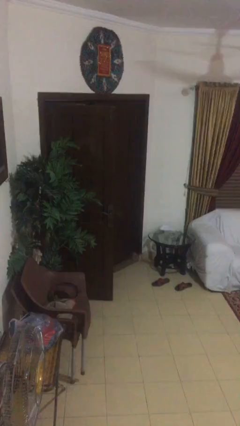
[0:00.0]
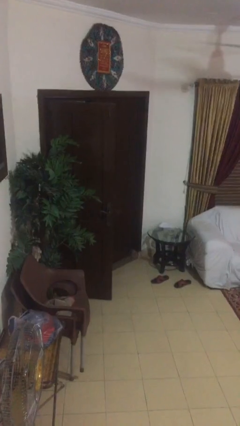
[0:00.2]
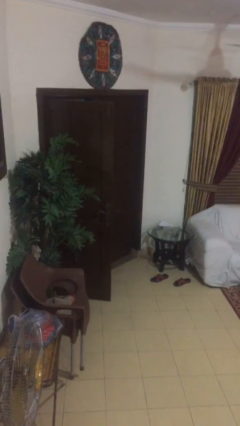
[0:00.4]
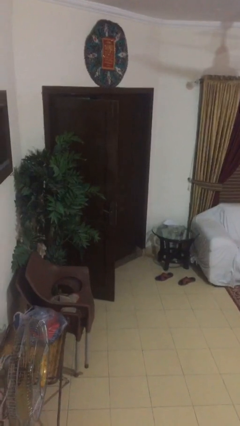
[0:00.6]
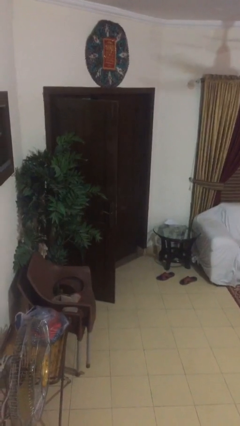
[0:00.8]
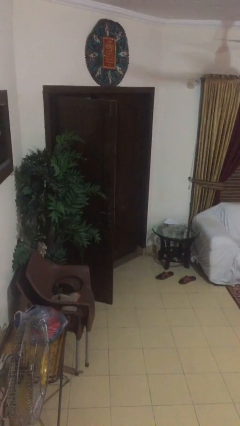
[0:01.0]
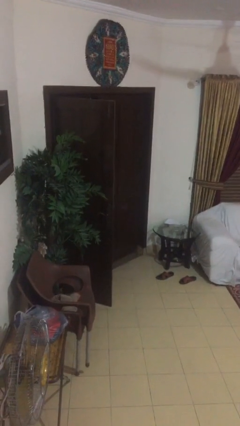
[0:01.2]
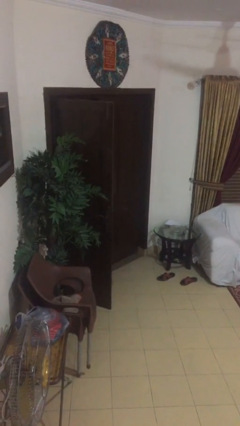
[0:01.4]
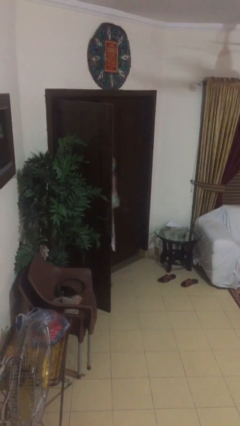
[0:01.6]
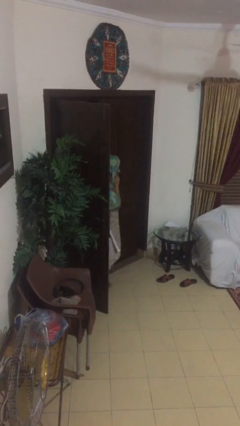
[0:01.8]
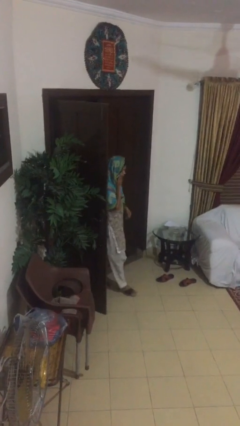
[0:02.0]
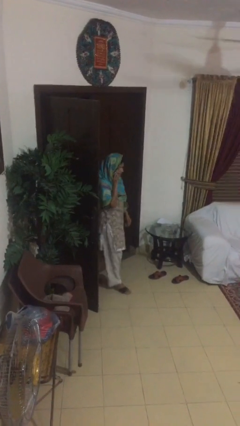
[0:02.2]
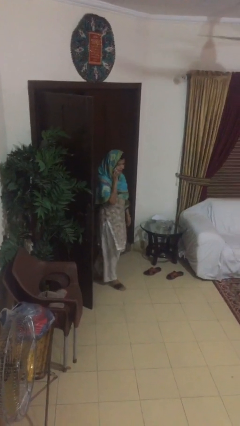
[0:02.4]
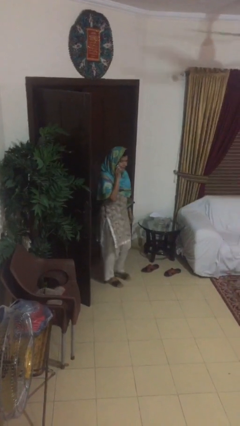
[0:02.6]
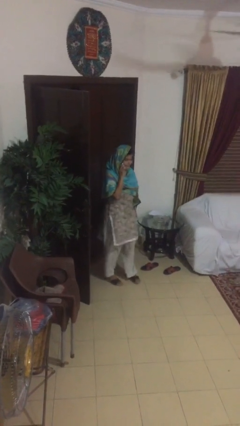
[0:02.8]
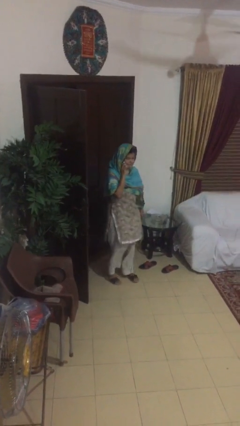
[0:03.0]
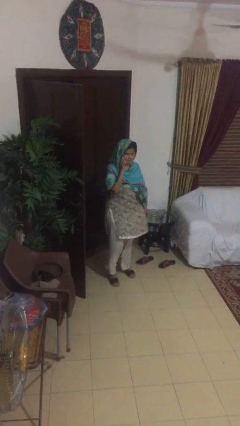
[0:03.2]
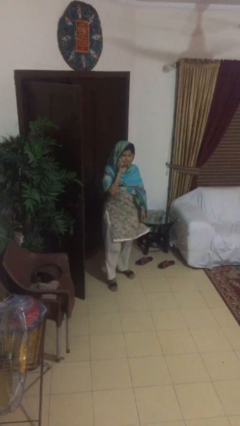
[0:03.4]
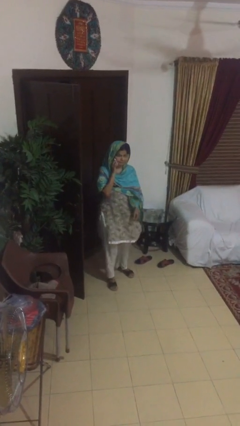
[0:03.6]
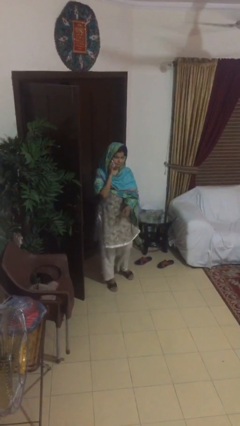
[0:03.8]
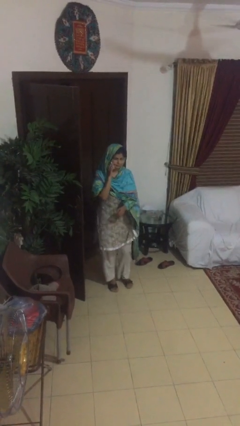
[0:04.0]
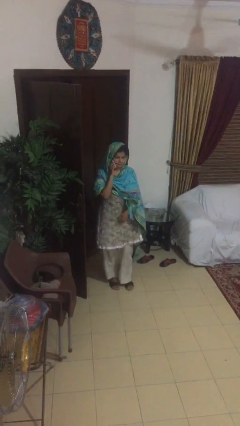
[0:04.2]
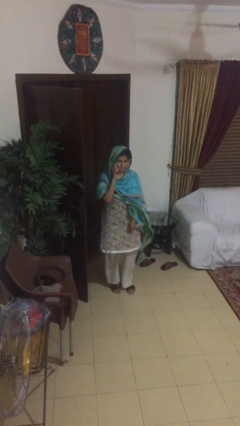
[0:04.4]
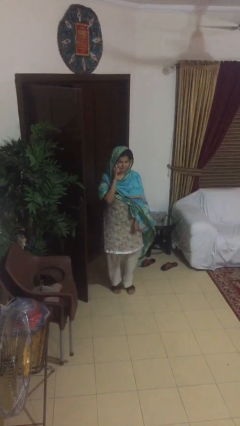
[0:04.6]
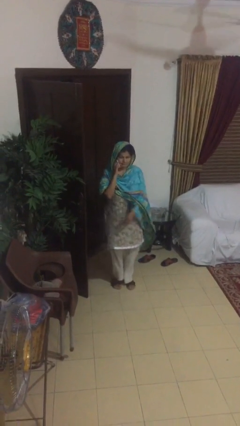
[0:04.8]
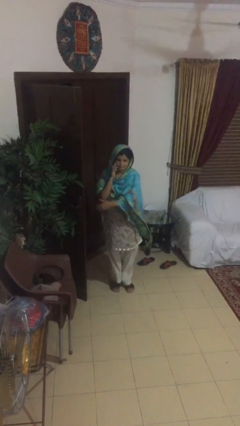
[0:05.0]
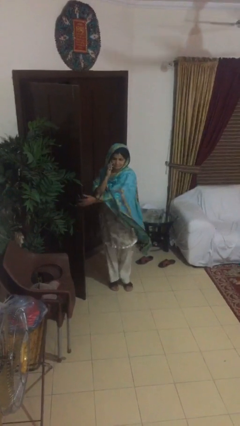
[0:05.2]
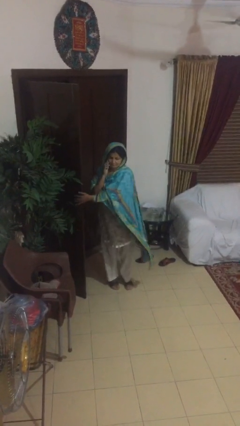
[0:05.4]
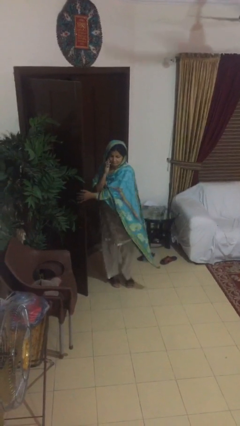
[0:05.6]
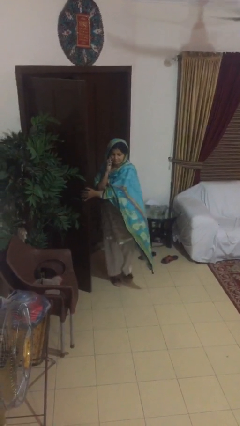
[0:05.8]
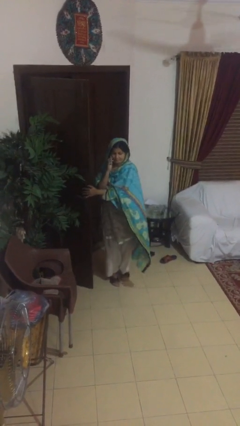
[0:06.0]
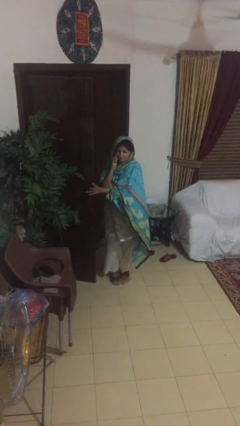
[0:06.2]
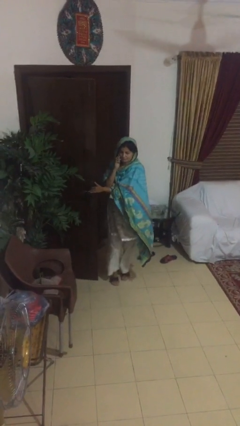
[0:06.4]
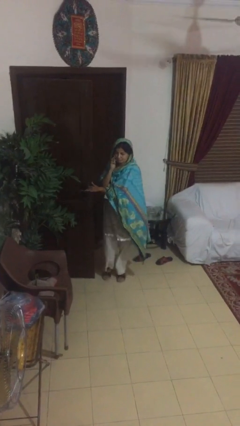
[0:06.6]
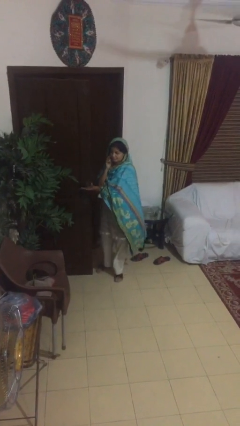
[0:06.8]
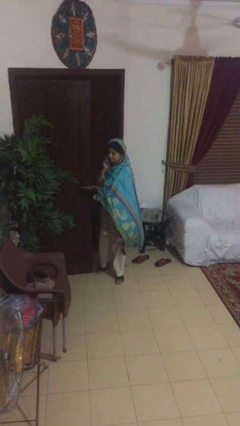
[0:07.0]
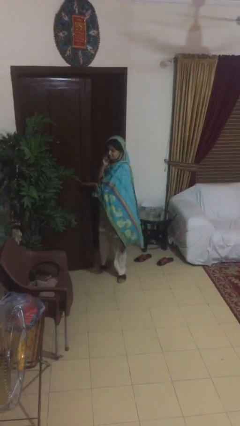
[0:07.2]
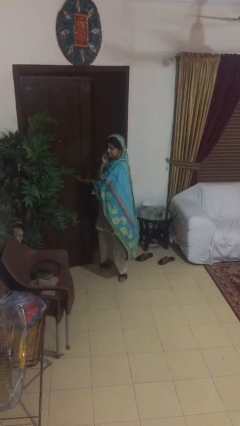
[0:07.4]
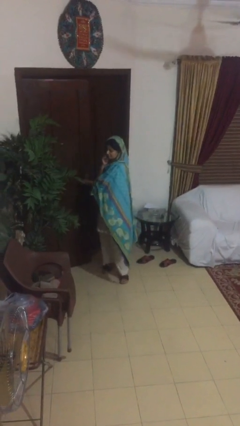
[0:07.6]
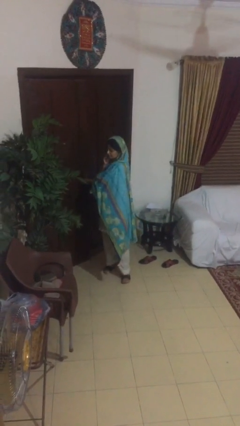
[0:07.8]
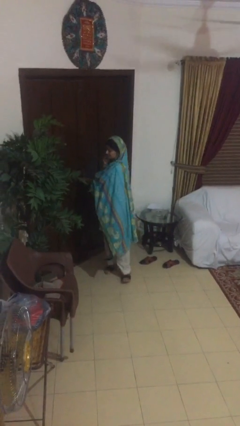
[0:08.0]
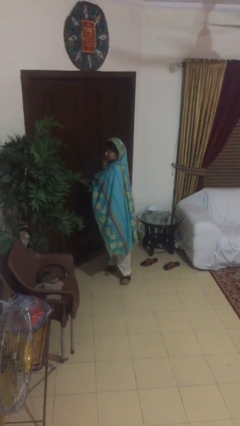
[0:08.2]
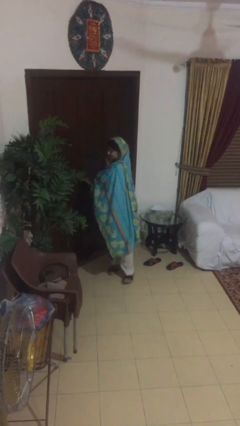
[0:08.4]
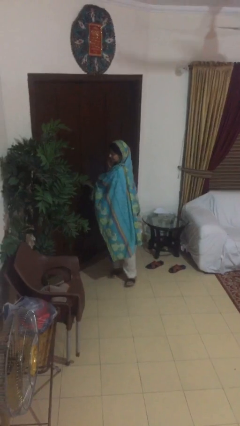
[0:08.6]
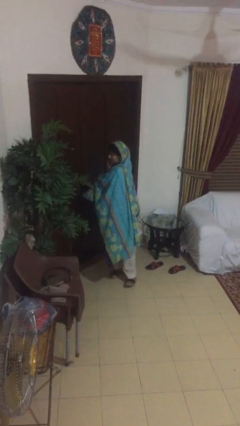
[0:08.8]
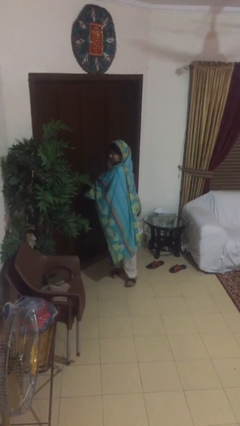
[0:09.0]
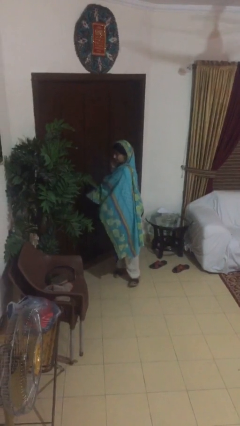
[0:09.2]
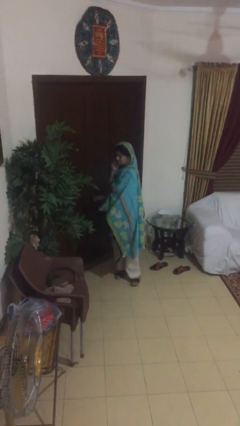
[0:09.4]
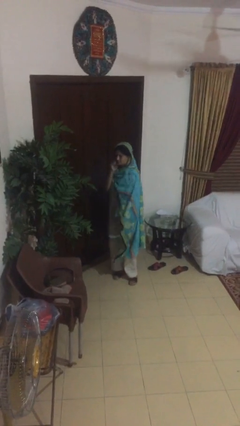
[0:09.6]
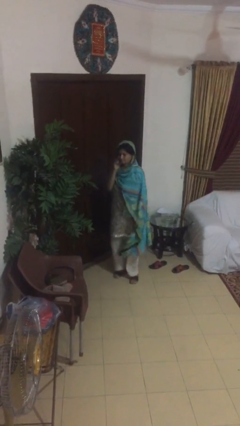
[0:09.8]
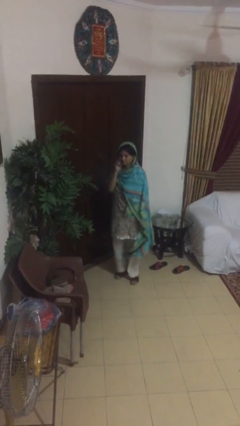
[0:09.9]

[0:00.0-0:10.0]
person enters scene through structure

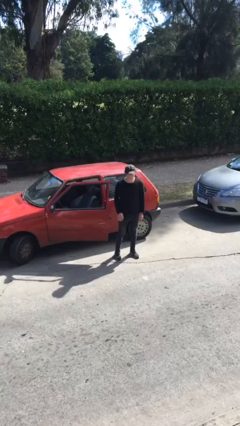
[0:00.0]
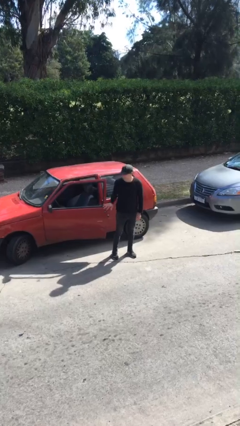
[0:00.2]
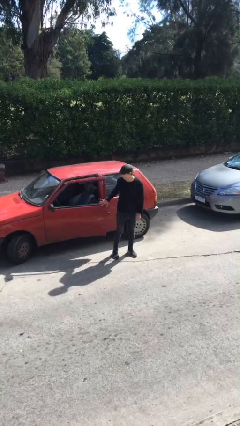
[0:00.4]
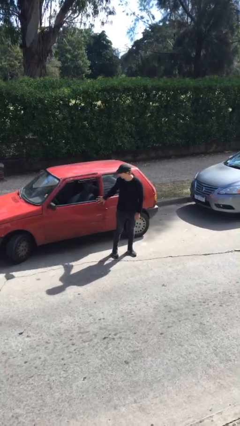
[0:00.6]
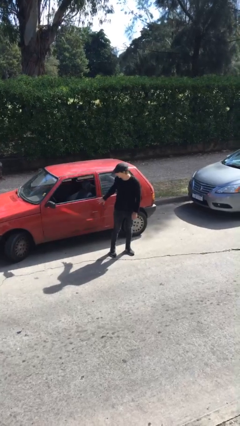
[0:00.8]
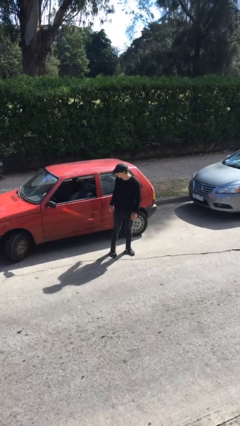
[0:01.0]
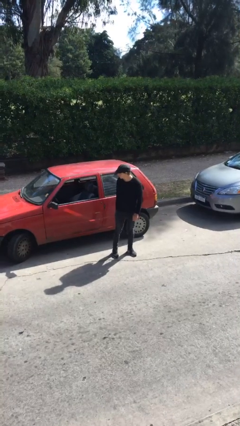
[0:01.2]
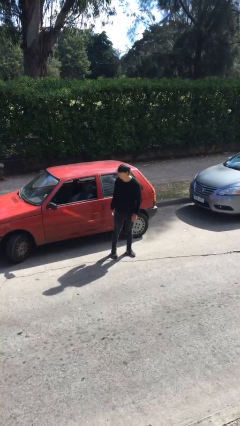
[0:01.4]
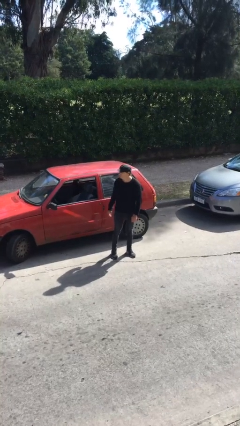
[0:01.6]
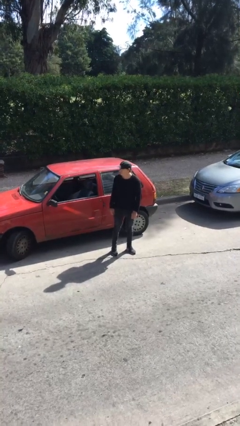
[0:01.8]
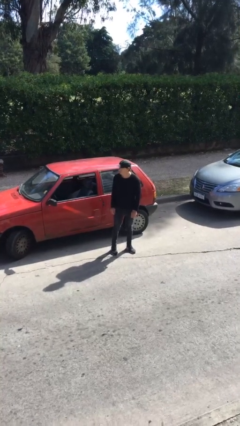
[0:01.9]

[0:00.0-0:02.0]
person closes car door

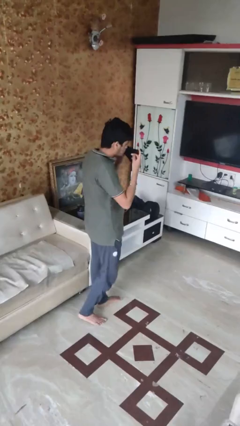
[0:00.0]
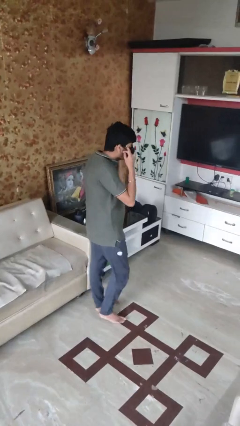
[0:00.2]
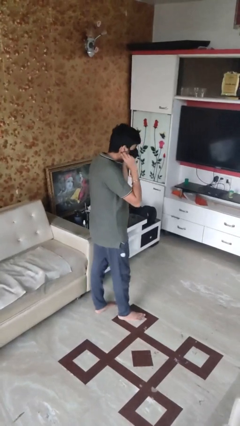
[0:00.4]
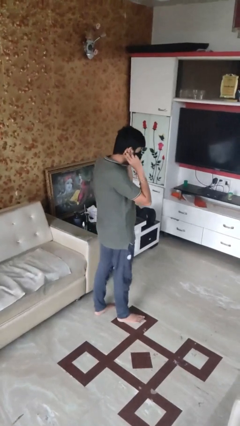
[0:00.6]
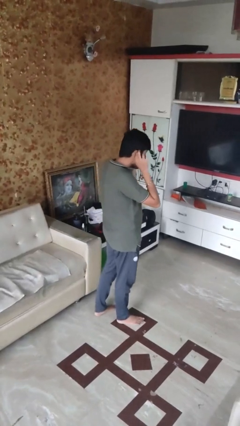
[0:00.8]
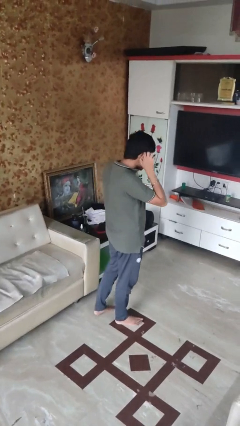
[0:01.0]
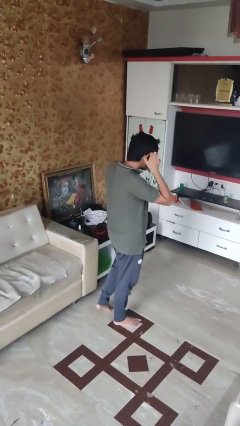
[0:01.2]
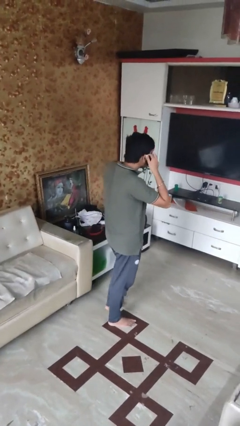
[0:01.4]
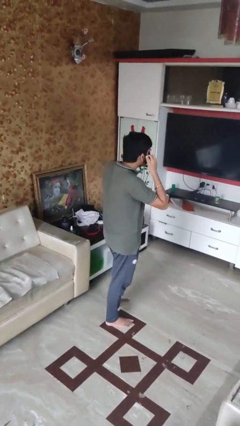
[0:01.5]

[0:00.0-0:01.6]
person puts on facemask

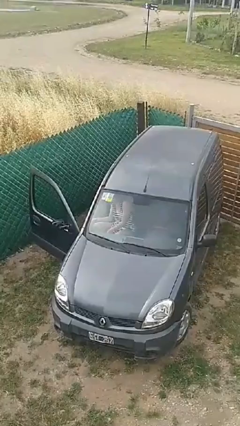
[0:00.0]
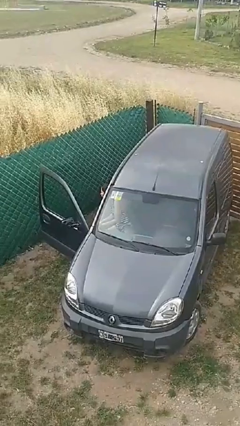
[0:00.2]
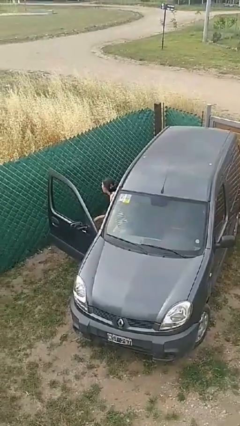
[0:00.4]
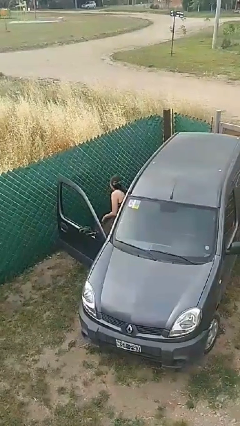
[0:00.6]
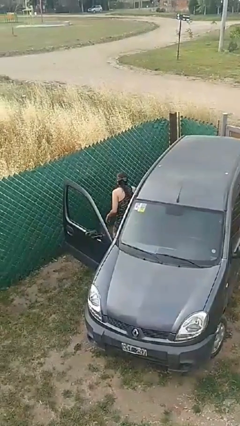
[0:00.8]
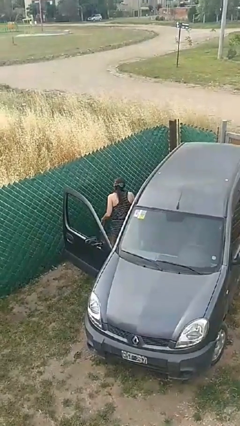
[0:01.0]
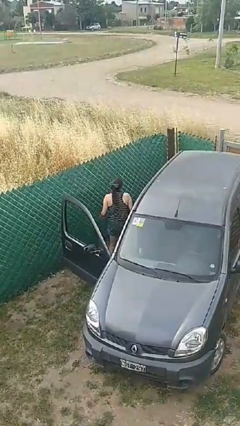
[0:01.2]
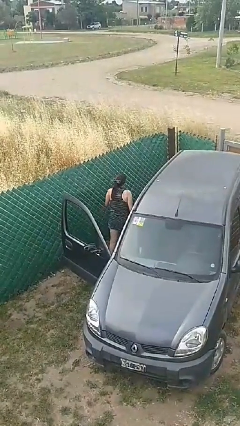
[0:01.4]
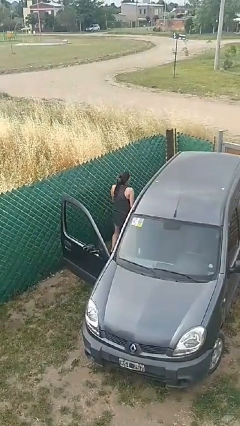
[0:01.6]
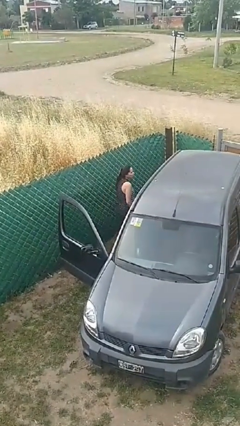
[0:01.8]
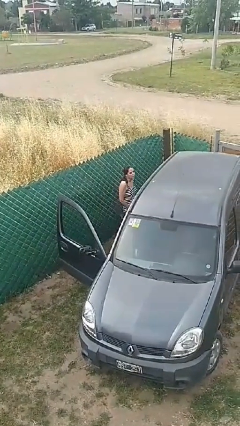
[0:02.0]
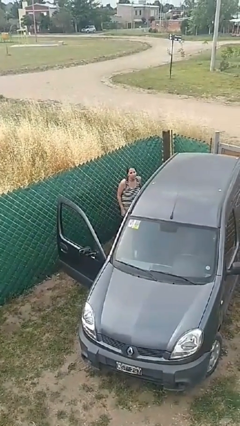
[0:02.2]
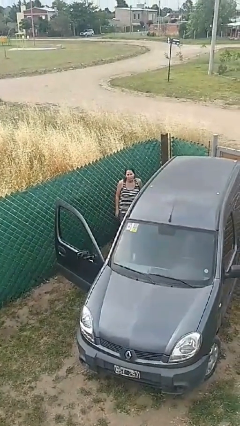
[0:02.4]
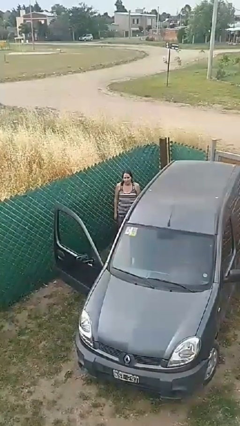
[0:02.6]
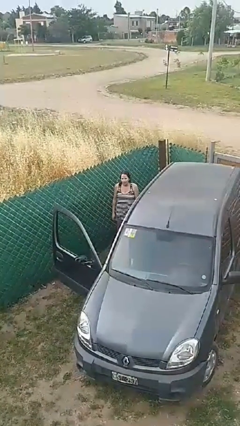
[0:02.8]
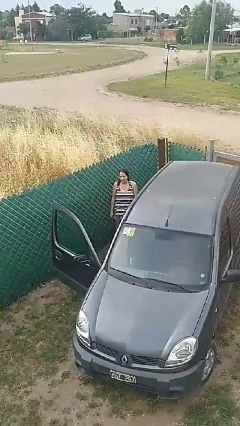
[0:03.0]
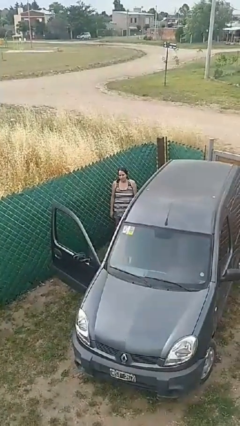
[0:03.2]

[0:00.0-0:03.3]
person exits car

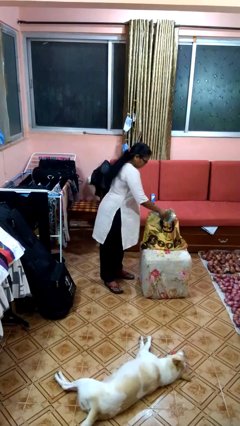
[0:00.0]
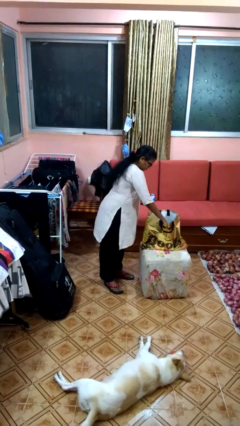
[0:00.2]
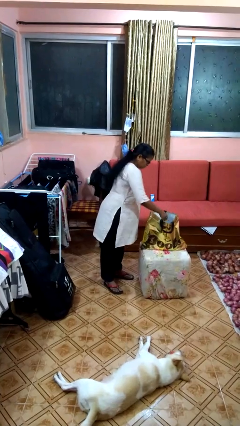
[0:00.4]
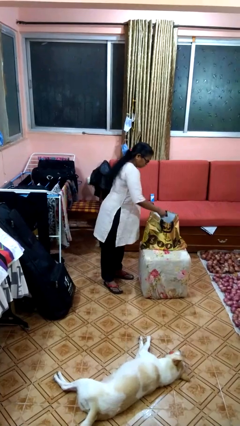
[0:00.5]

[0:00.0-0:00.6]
person puts object into bag

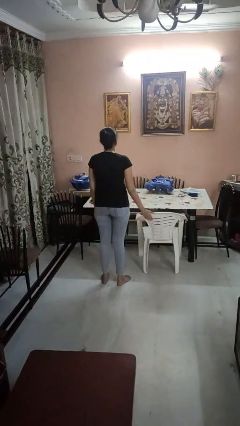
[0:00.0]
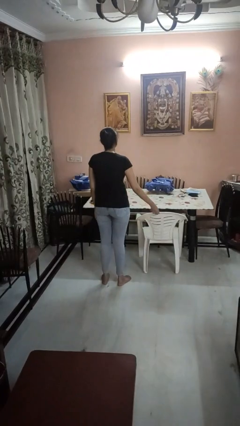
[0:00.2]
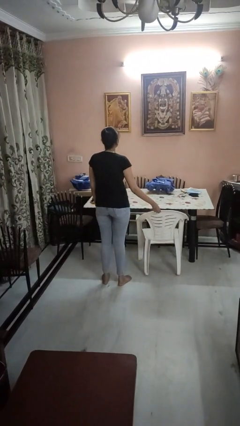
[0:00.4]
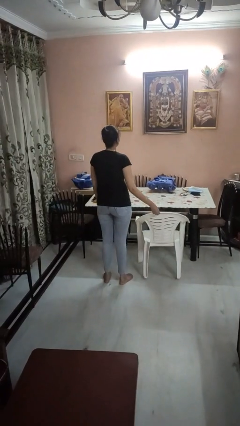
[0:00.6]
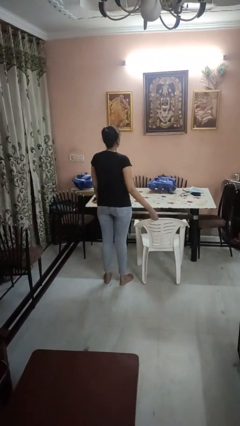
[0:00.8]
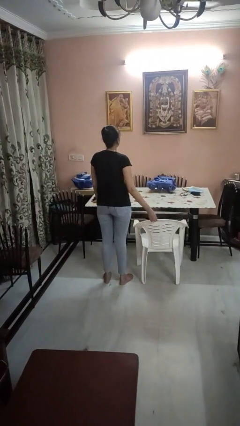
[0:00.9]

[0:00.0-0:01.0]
person pulls out chair
